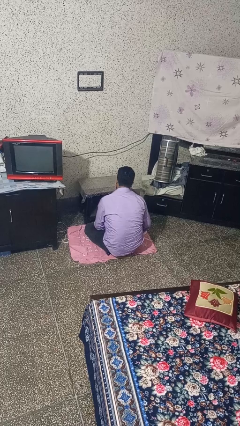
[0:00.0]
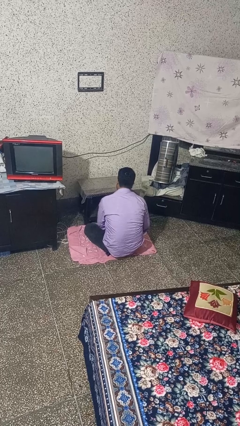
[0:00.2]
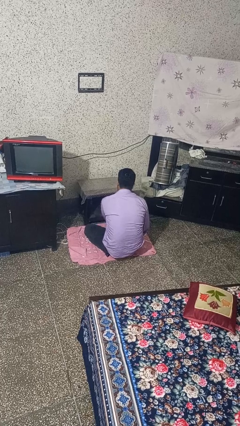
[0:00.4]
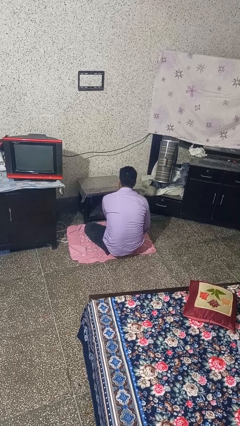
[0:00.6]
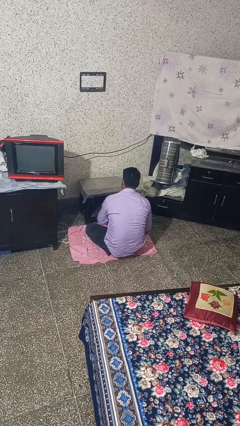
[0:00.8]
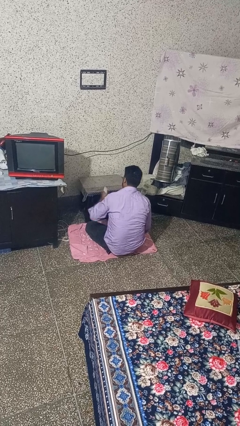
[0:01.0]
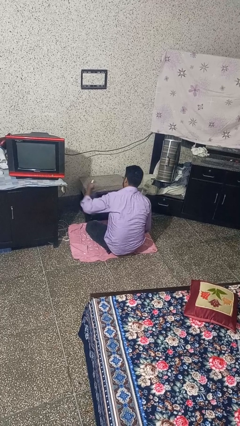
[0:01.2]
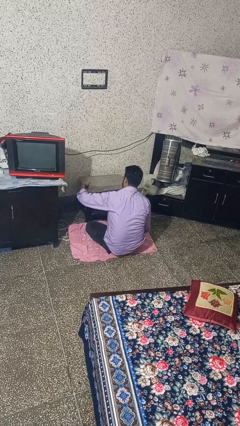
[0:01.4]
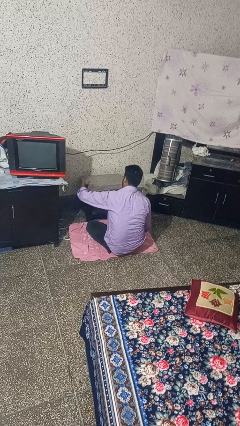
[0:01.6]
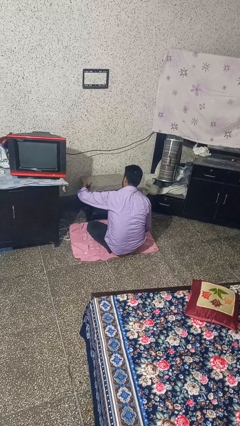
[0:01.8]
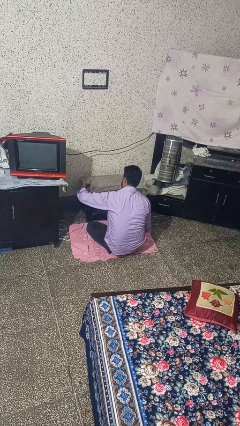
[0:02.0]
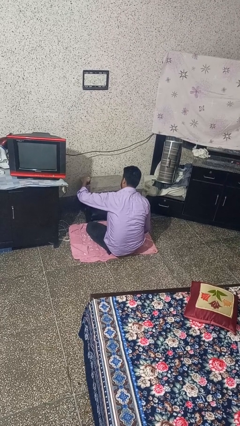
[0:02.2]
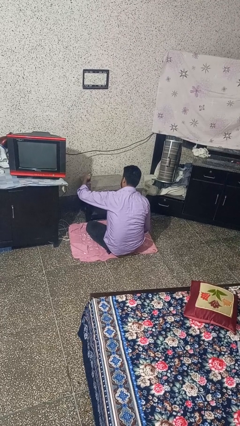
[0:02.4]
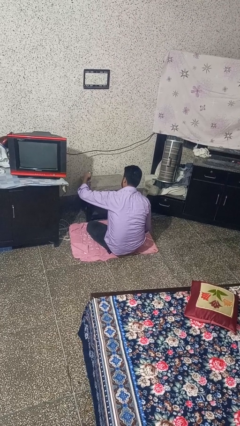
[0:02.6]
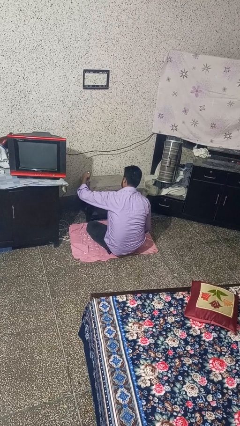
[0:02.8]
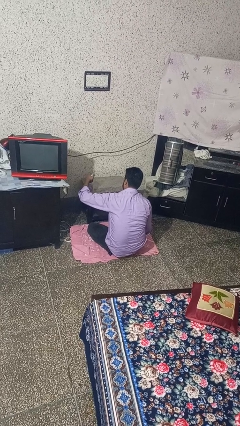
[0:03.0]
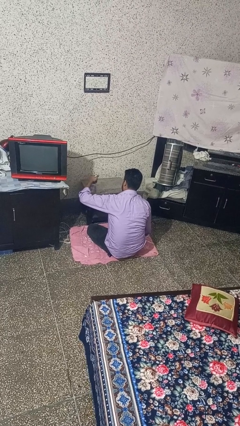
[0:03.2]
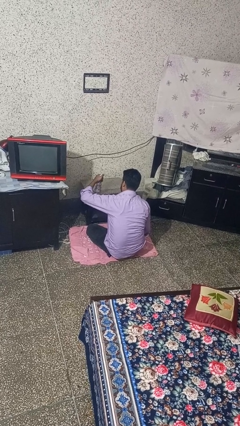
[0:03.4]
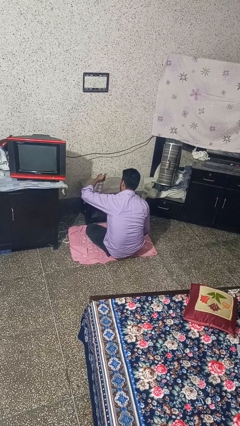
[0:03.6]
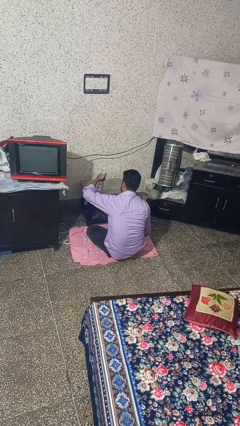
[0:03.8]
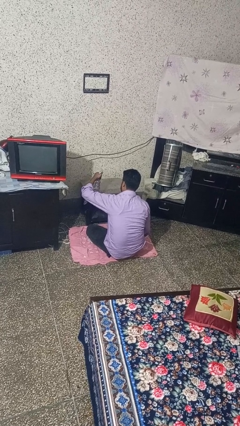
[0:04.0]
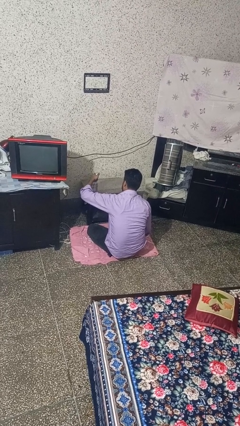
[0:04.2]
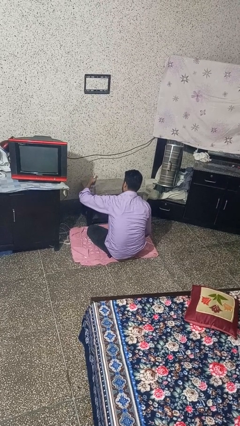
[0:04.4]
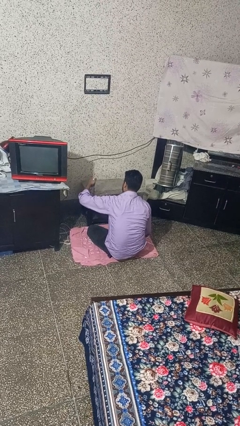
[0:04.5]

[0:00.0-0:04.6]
person sprays from bottle

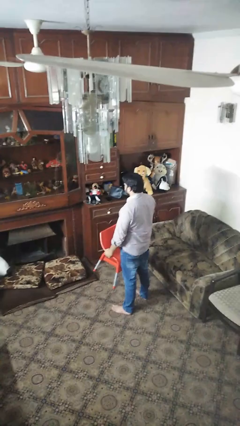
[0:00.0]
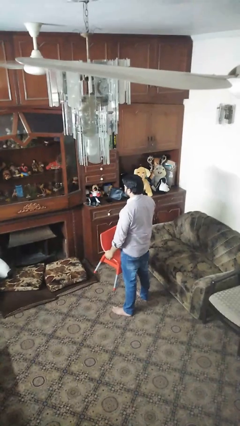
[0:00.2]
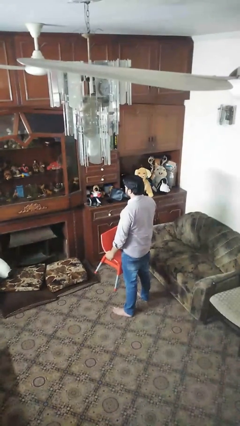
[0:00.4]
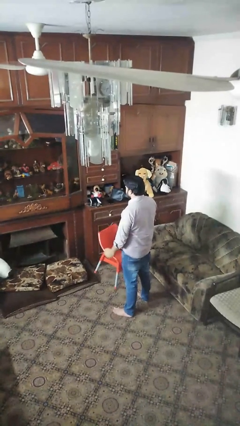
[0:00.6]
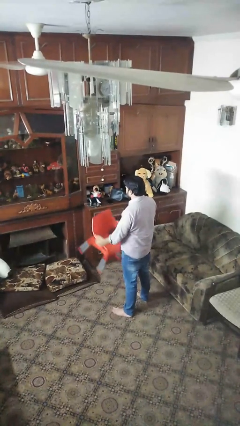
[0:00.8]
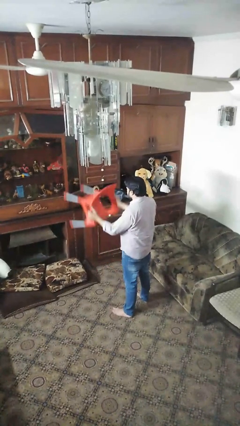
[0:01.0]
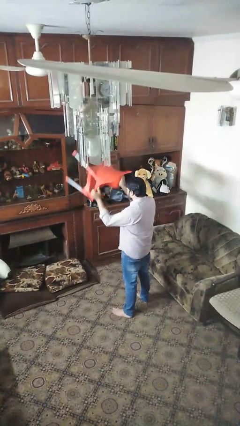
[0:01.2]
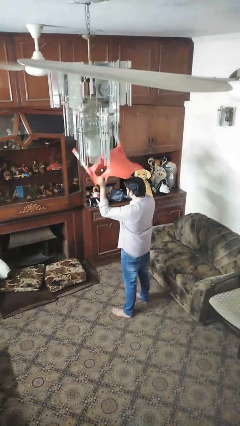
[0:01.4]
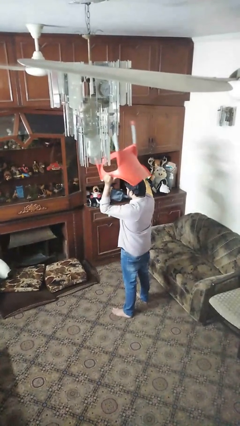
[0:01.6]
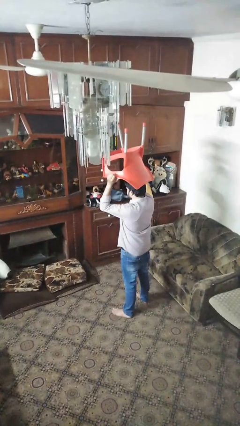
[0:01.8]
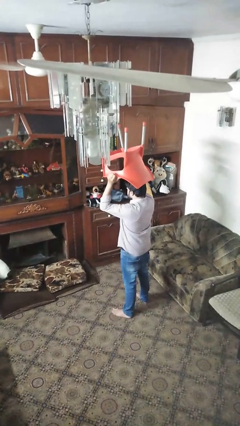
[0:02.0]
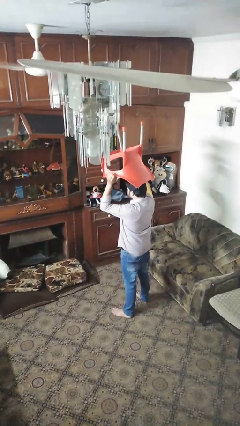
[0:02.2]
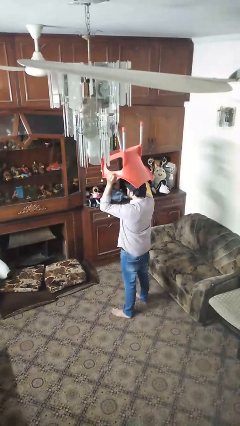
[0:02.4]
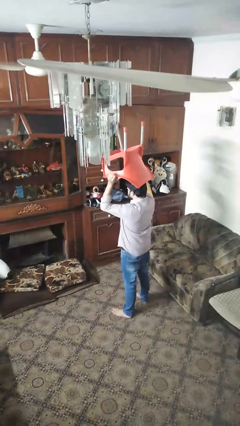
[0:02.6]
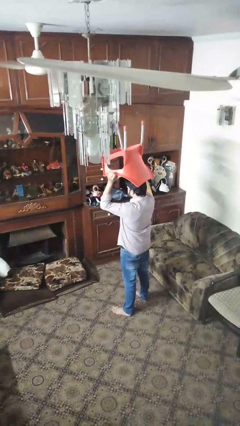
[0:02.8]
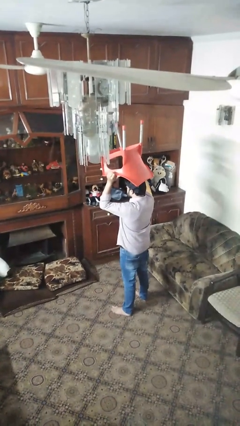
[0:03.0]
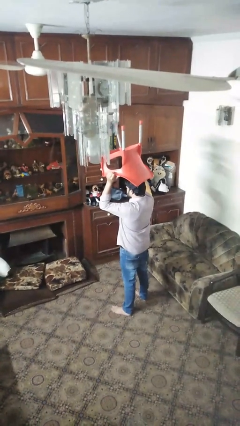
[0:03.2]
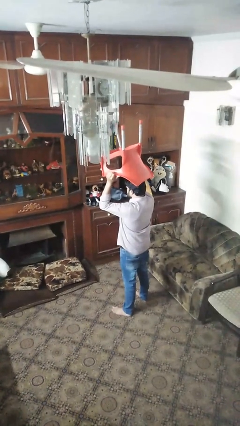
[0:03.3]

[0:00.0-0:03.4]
person holds object above head

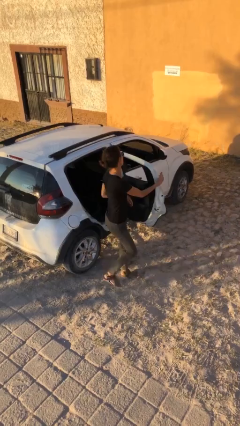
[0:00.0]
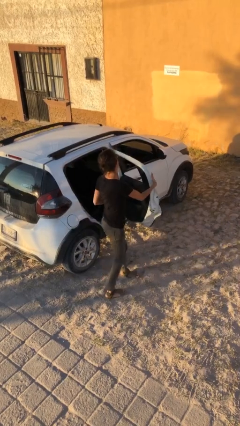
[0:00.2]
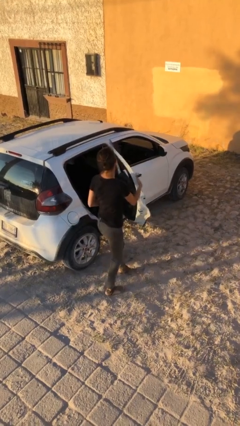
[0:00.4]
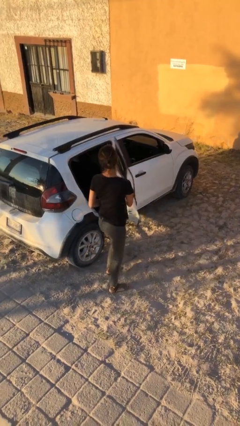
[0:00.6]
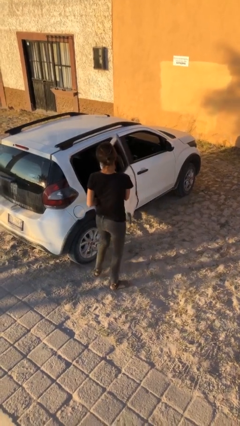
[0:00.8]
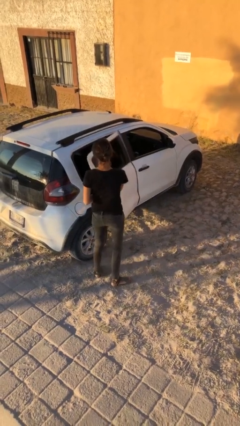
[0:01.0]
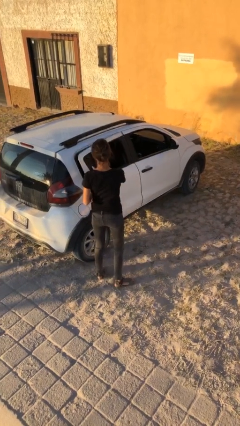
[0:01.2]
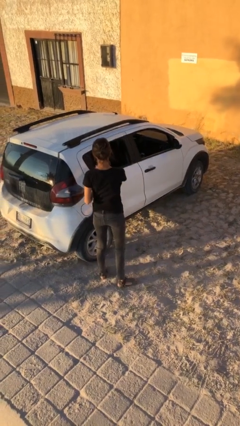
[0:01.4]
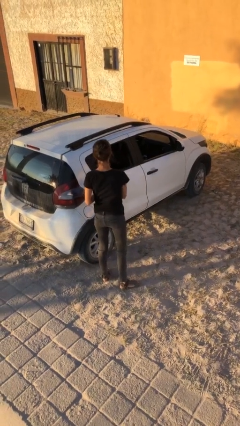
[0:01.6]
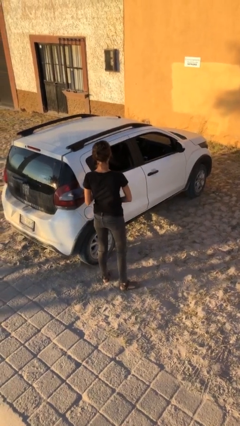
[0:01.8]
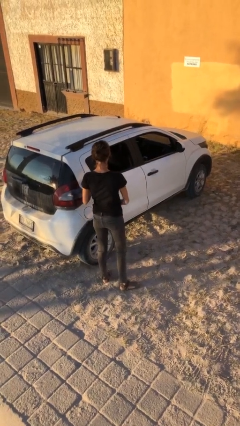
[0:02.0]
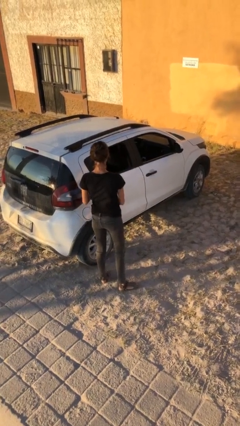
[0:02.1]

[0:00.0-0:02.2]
person closes car door

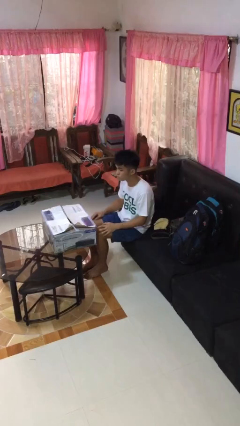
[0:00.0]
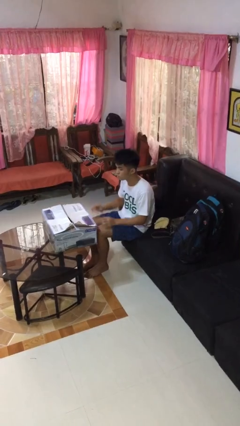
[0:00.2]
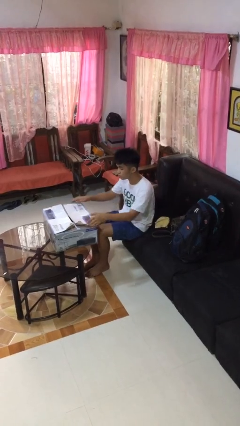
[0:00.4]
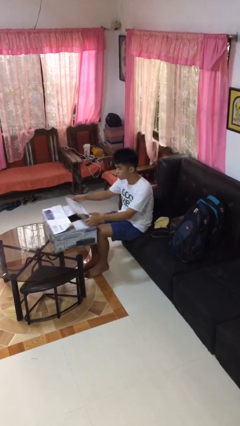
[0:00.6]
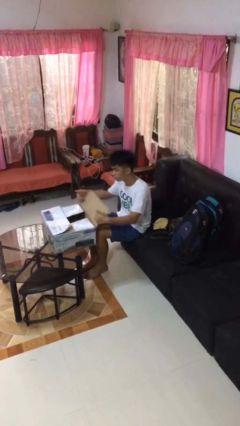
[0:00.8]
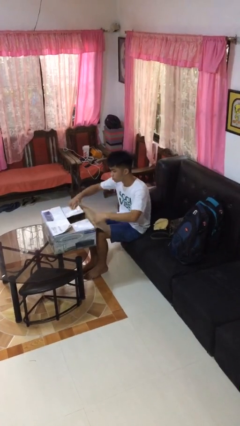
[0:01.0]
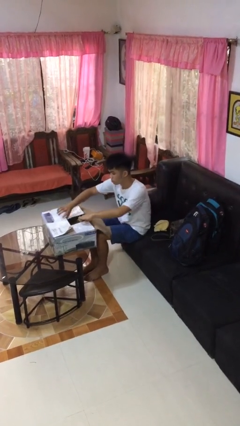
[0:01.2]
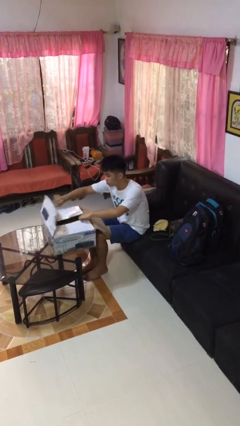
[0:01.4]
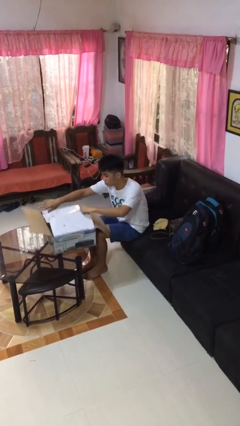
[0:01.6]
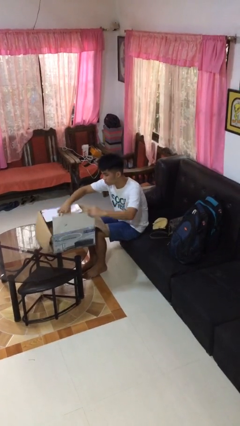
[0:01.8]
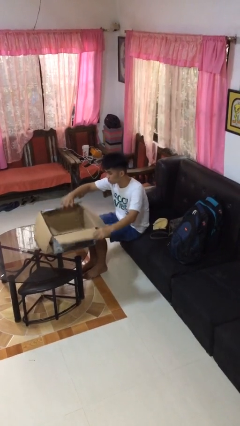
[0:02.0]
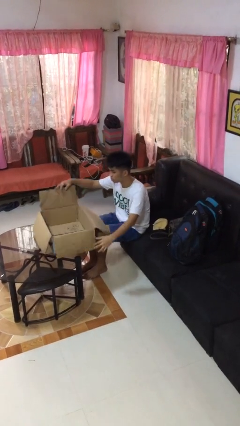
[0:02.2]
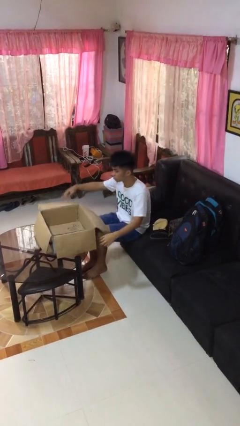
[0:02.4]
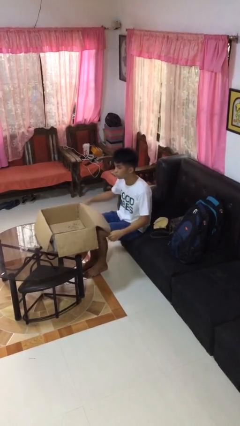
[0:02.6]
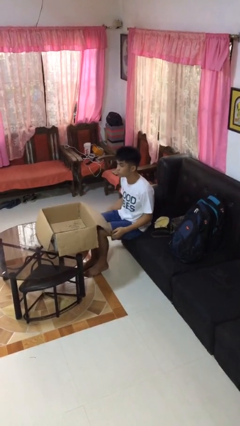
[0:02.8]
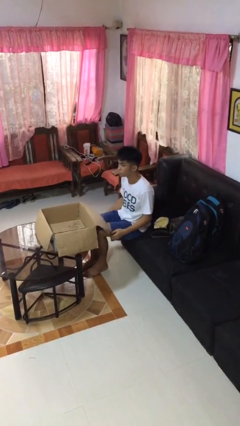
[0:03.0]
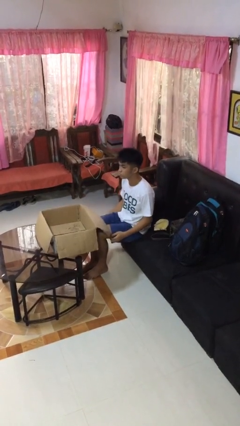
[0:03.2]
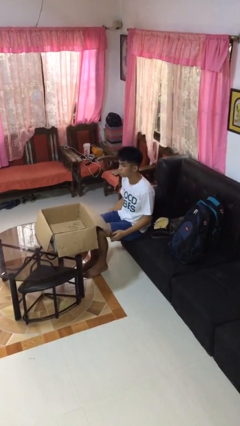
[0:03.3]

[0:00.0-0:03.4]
person opens box

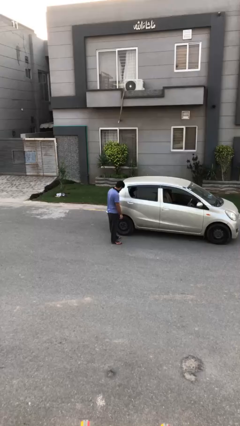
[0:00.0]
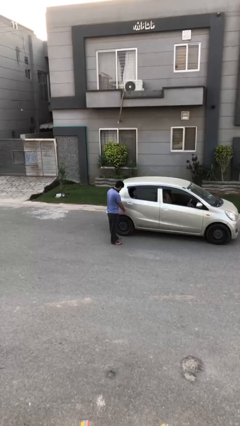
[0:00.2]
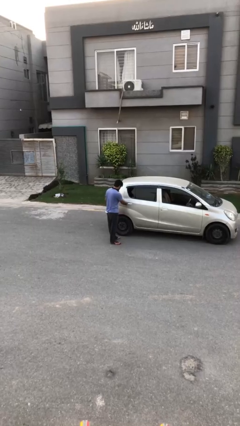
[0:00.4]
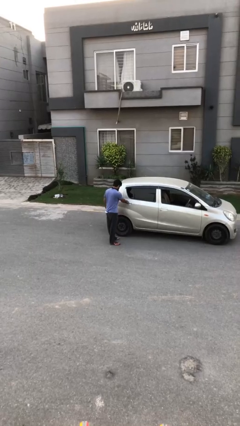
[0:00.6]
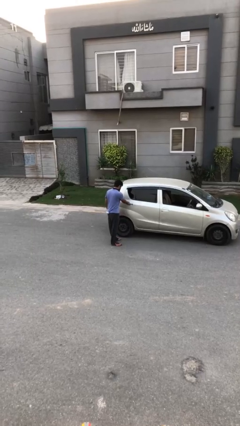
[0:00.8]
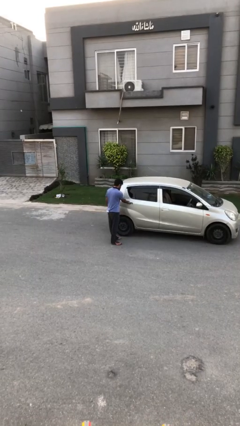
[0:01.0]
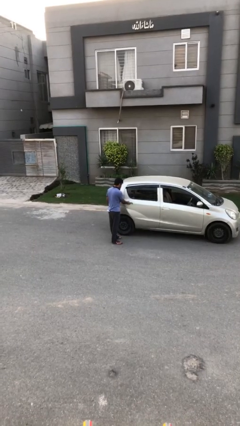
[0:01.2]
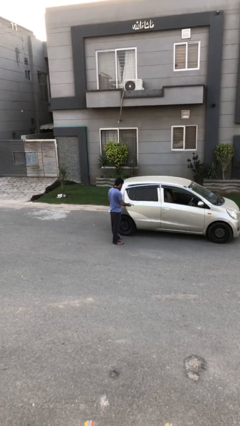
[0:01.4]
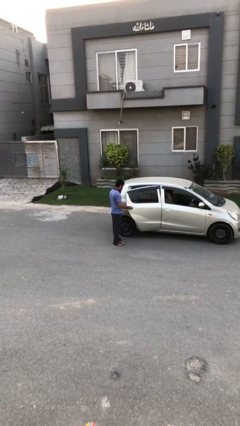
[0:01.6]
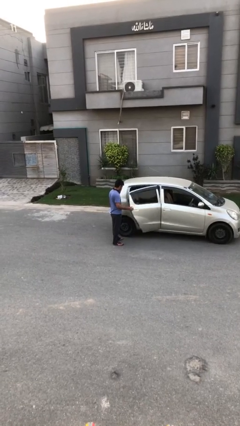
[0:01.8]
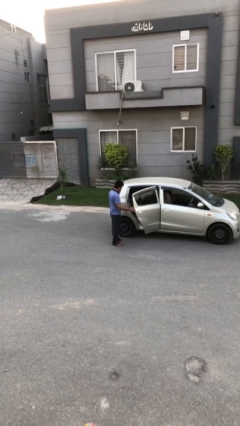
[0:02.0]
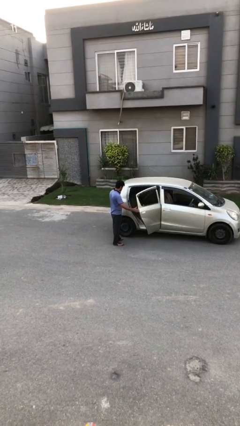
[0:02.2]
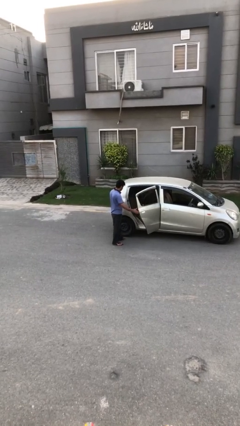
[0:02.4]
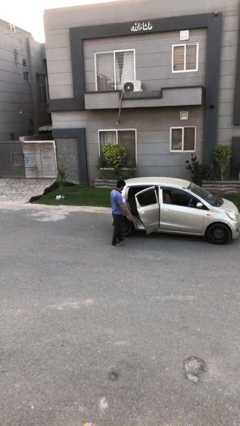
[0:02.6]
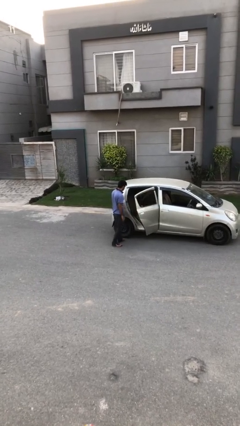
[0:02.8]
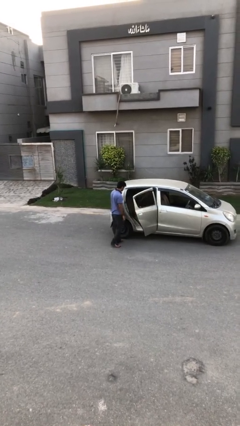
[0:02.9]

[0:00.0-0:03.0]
person opens car door

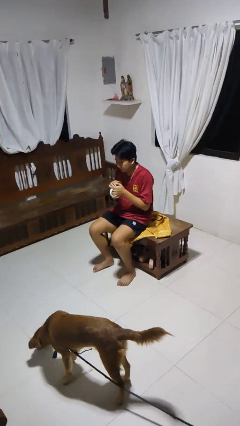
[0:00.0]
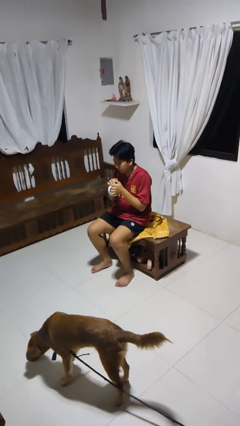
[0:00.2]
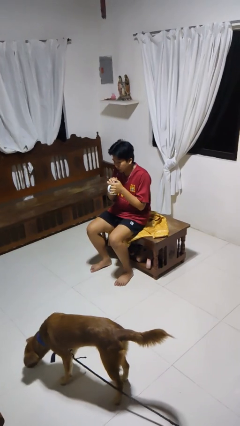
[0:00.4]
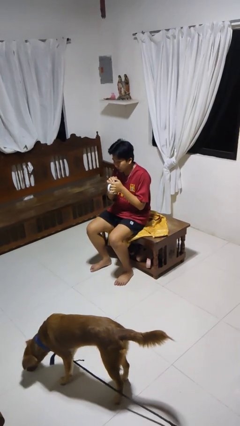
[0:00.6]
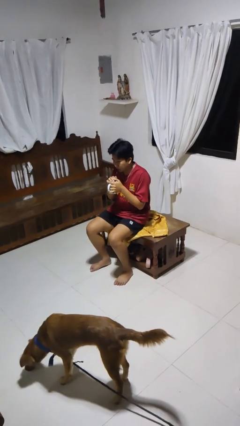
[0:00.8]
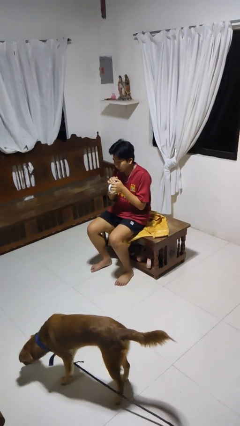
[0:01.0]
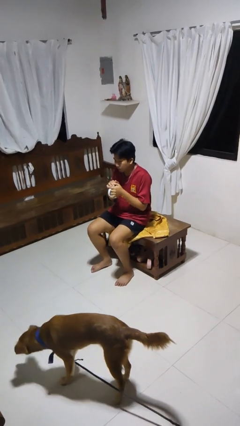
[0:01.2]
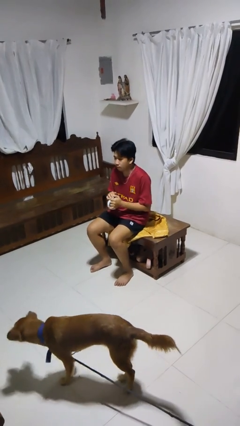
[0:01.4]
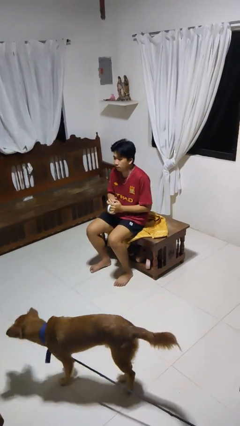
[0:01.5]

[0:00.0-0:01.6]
person drinks from straw
